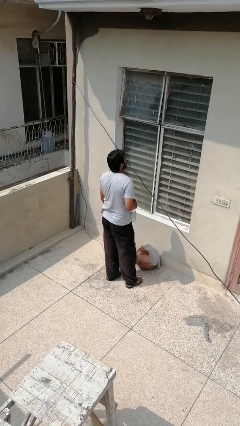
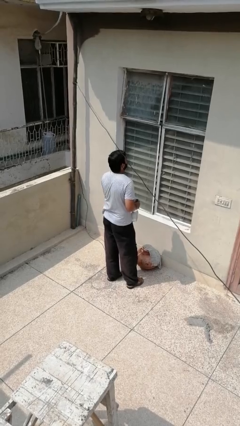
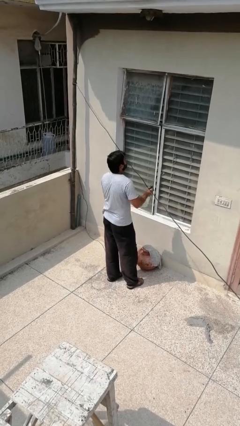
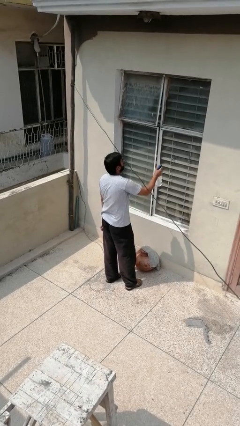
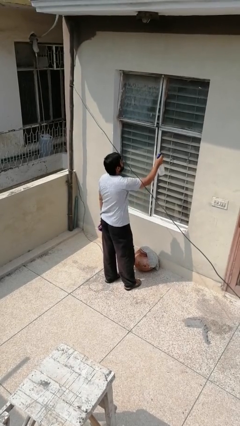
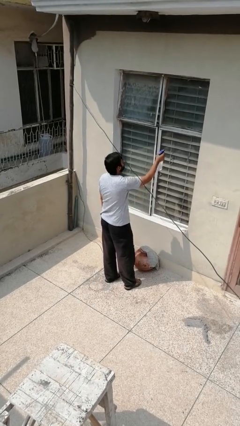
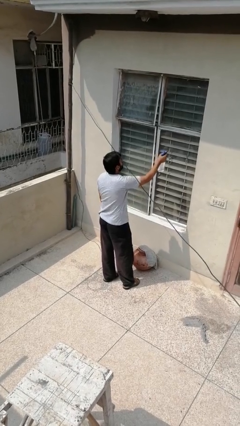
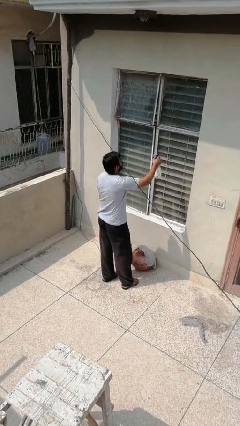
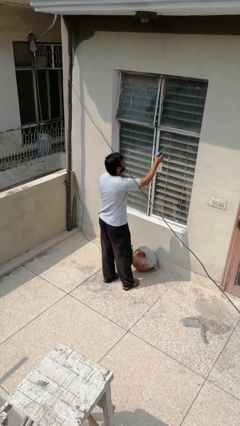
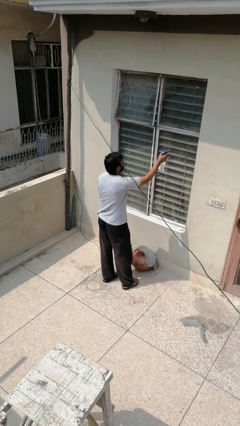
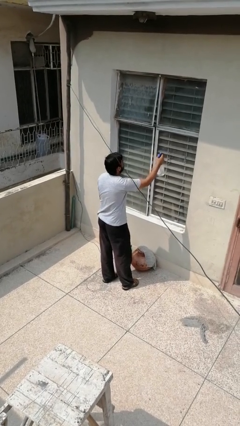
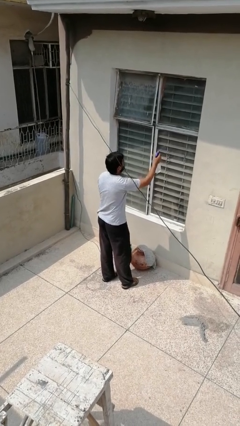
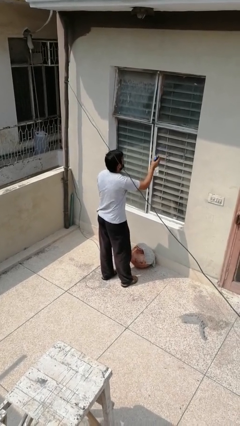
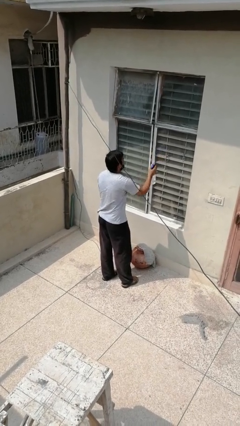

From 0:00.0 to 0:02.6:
person sprays from bottle

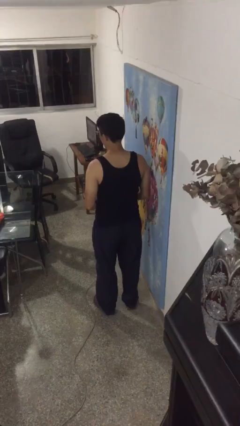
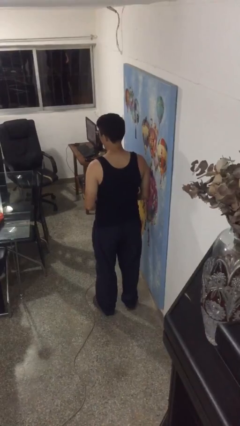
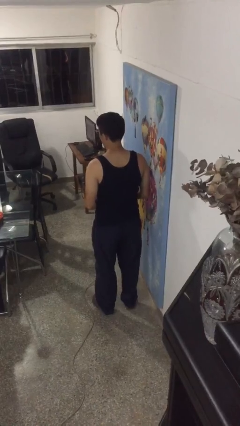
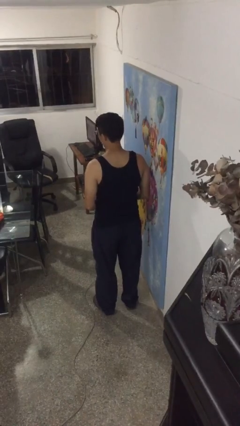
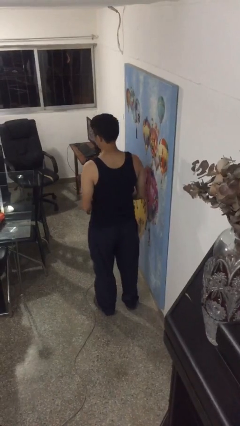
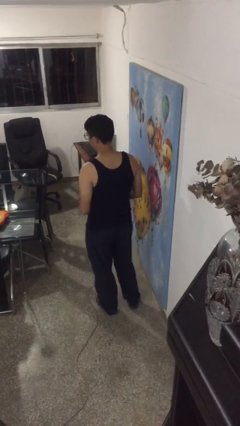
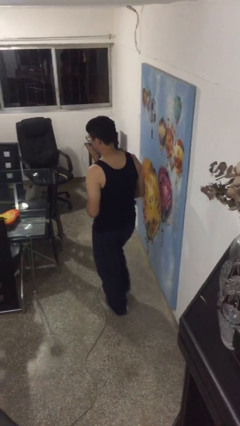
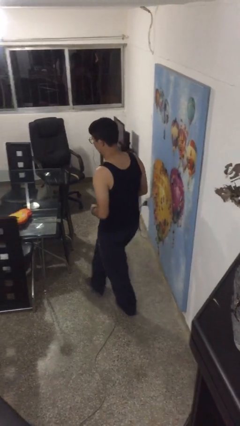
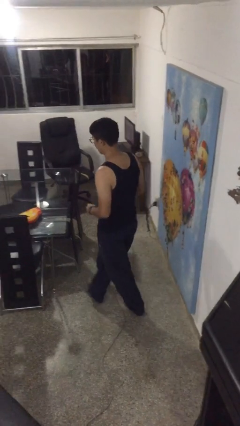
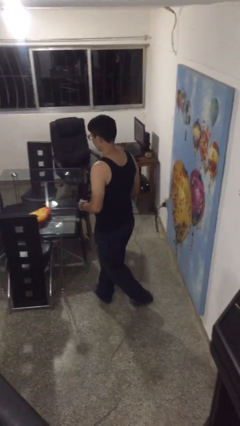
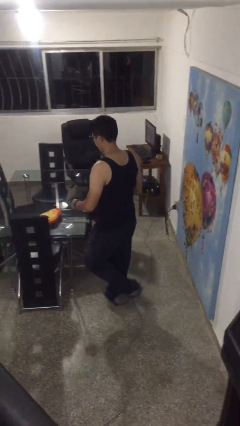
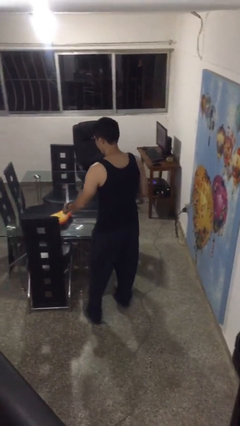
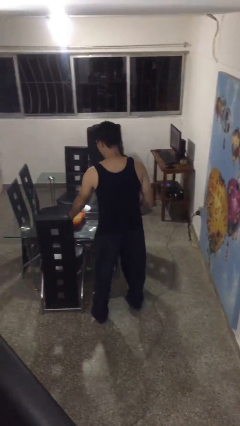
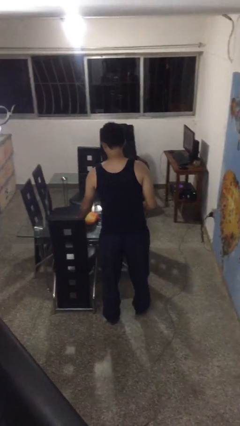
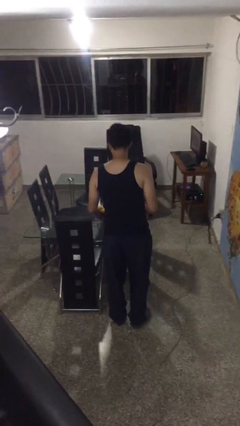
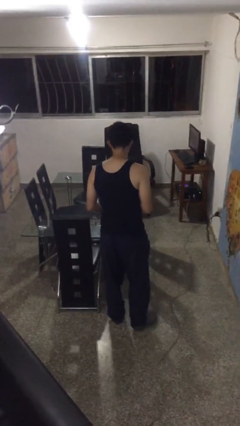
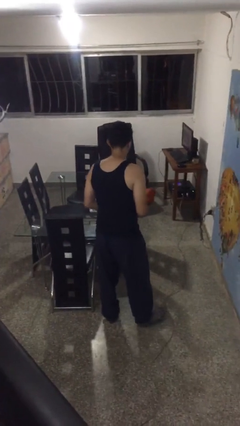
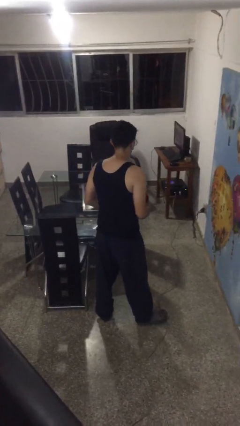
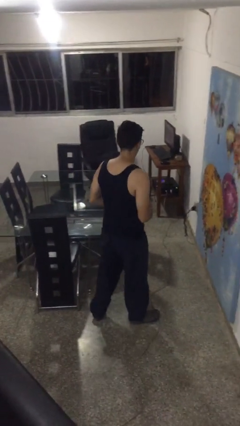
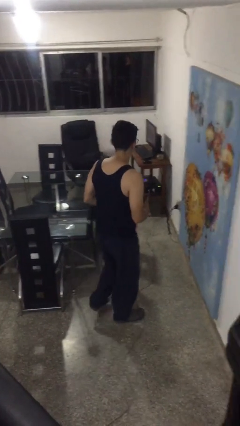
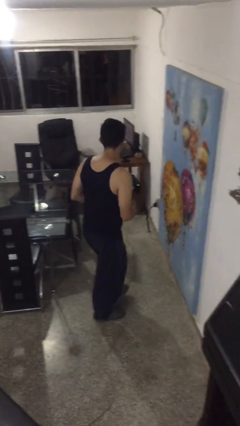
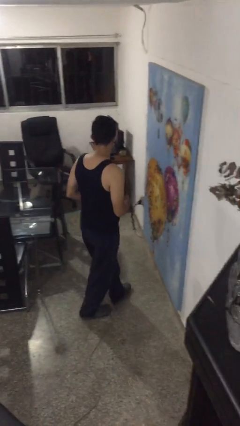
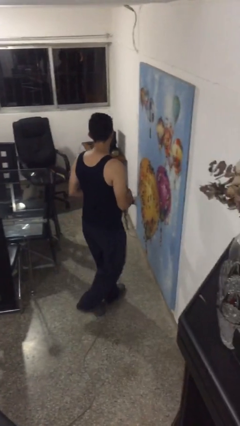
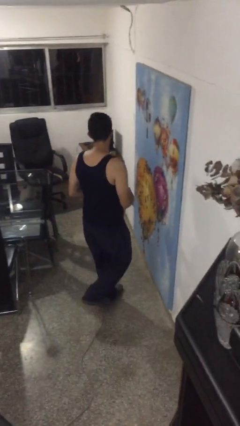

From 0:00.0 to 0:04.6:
person picks up object from table

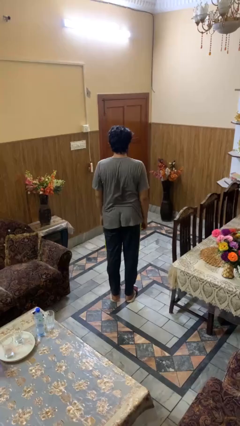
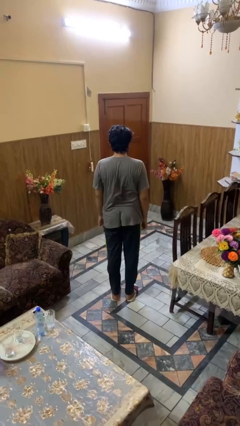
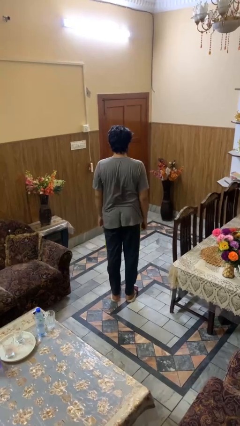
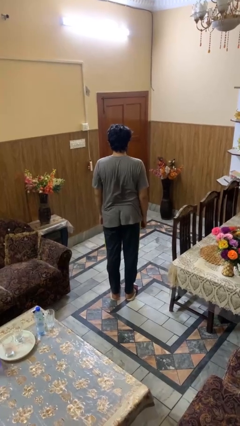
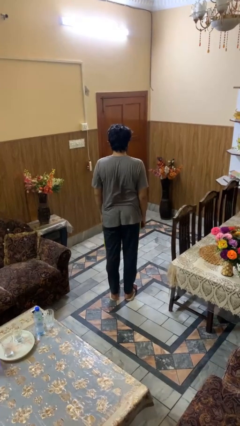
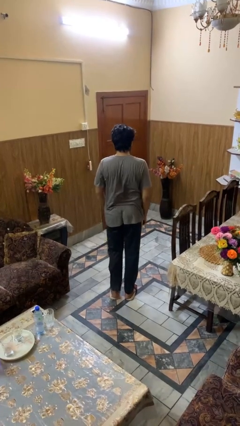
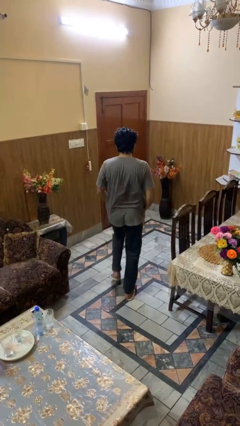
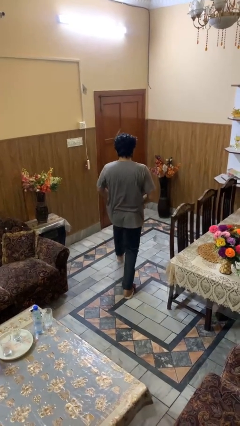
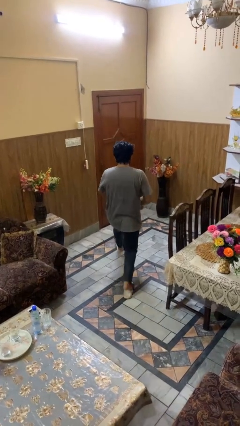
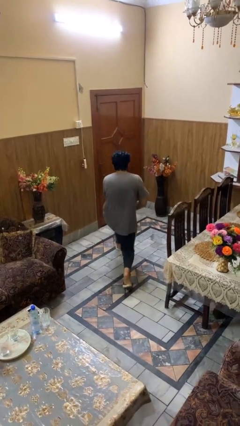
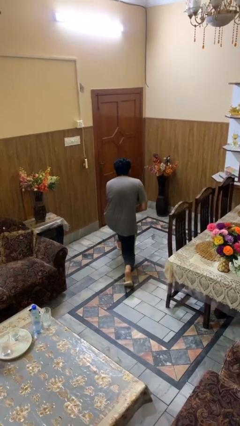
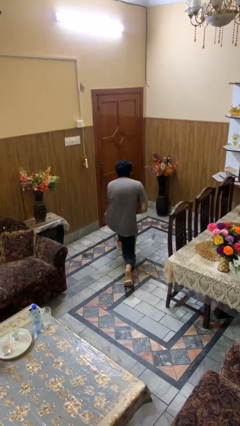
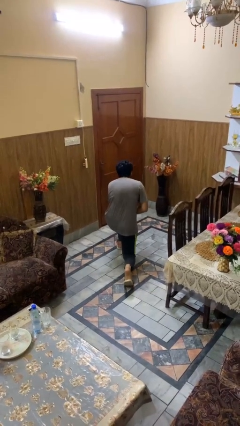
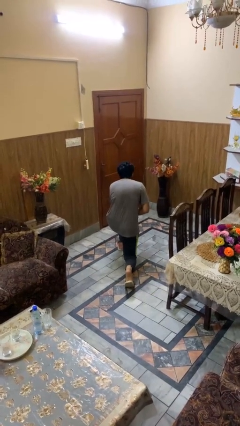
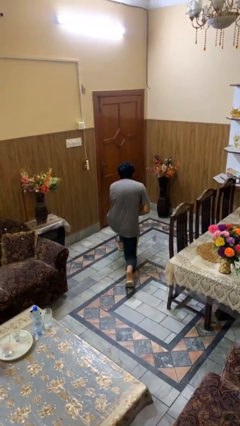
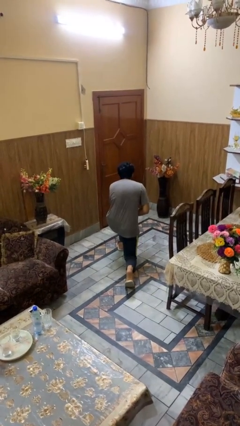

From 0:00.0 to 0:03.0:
person kneels

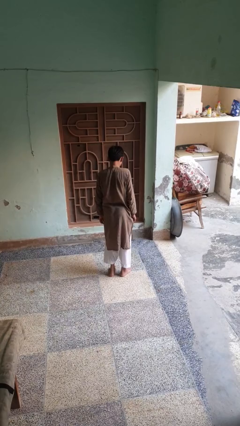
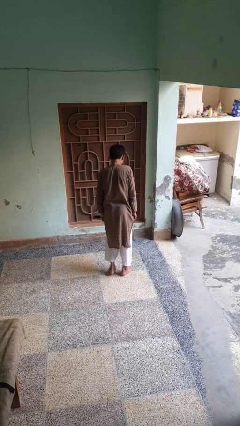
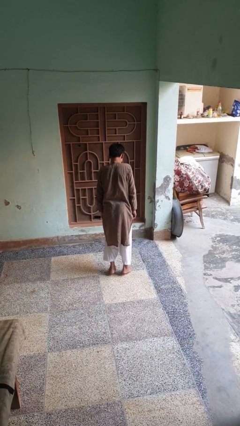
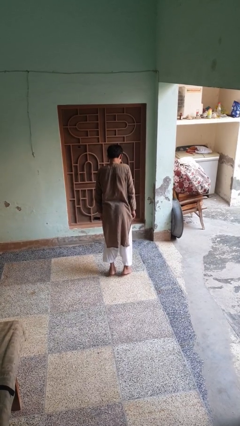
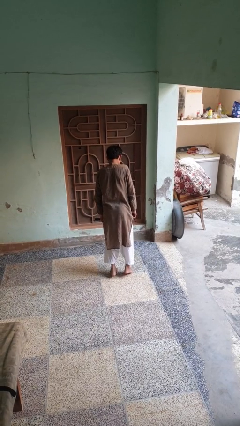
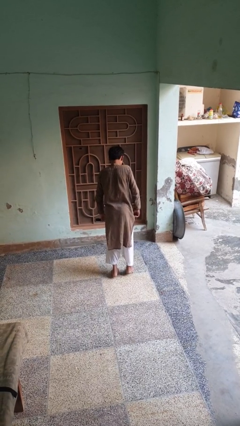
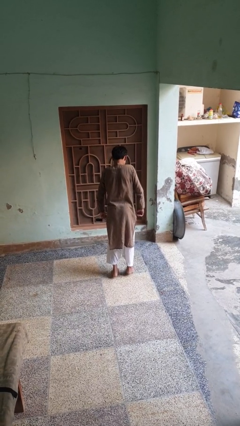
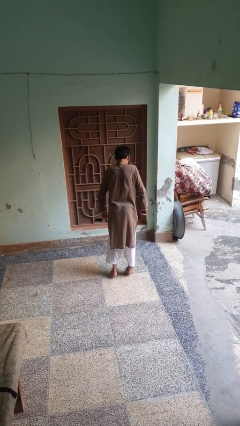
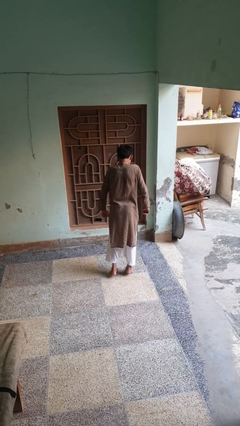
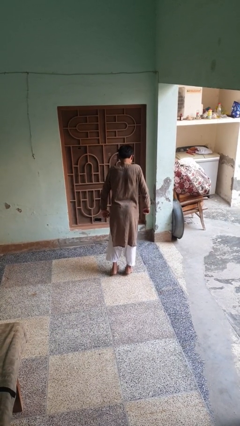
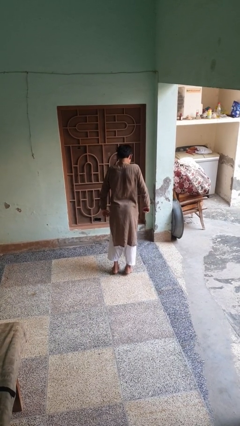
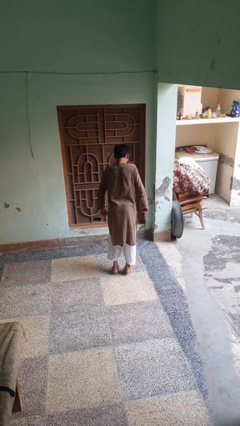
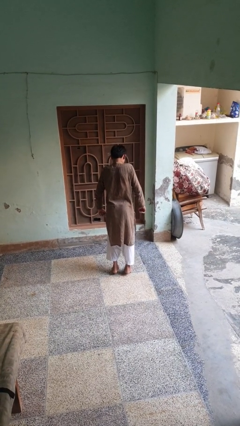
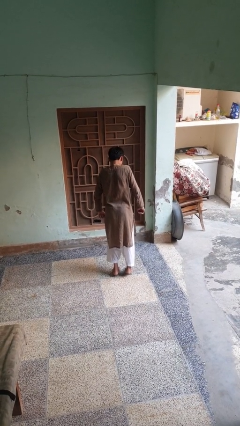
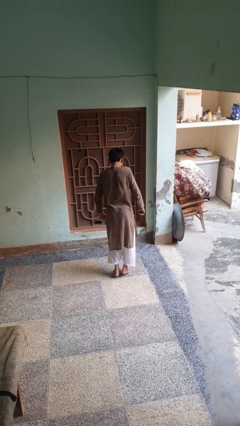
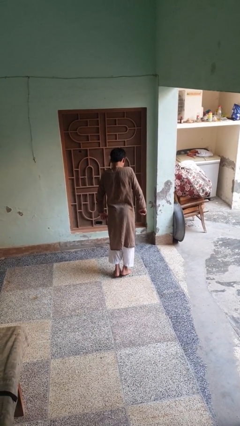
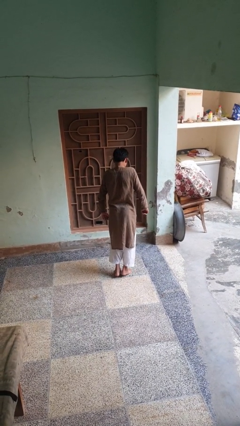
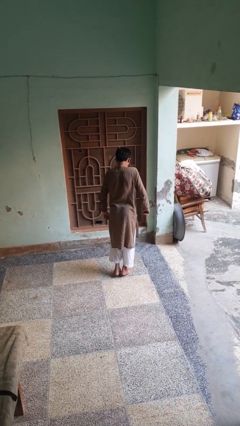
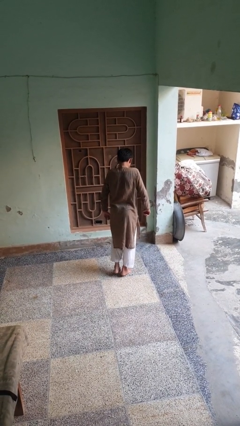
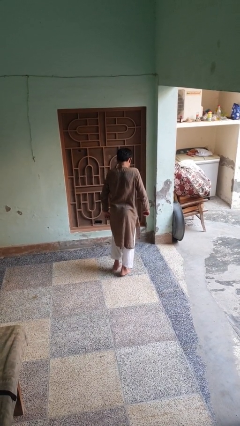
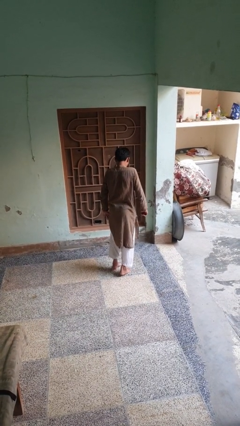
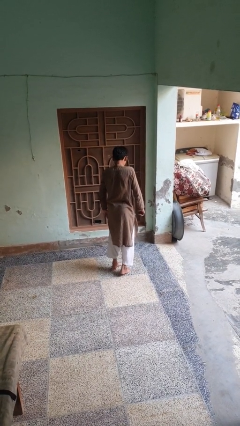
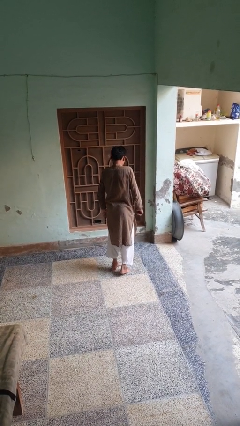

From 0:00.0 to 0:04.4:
person walks tiptoe

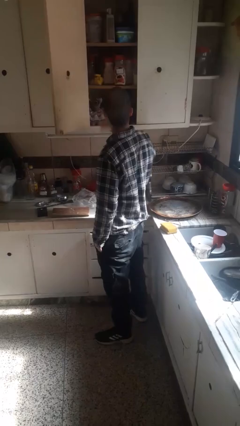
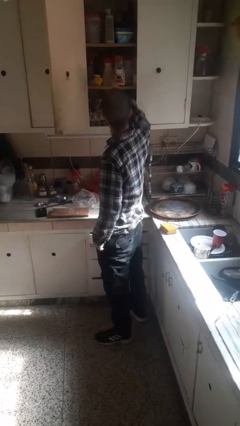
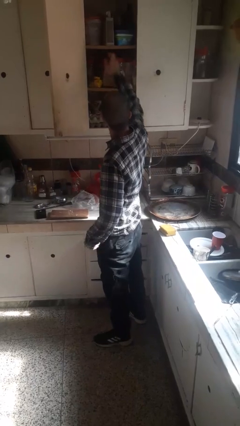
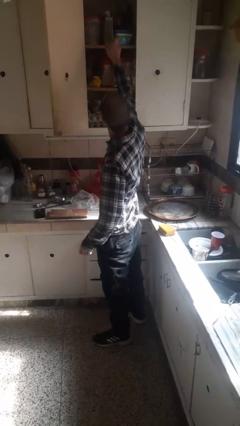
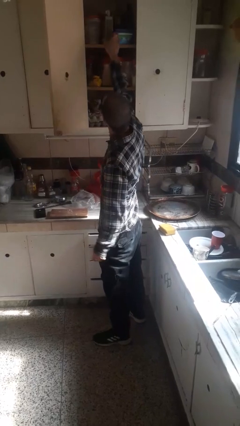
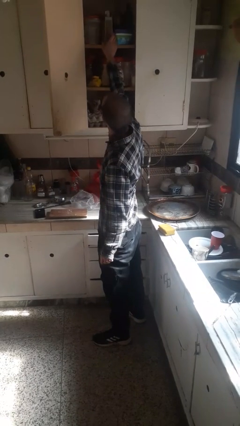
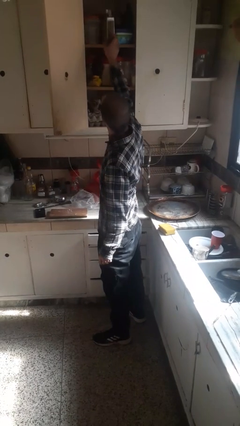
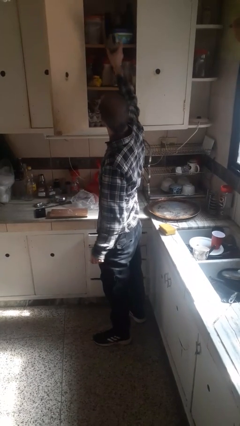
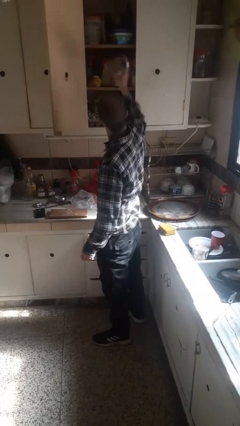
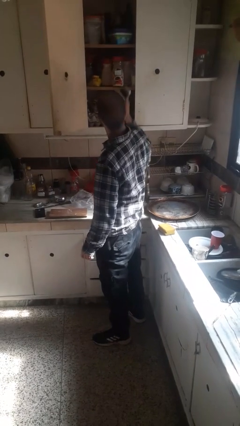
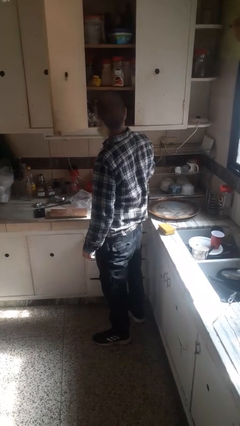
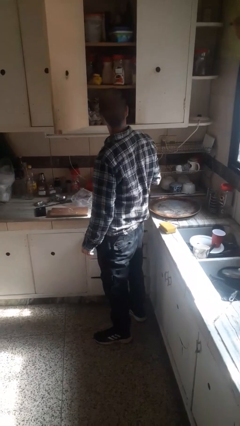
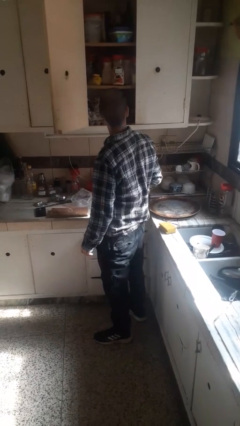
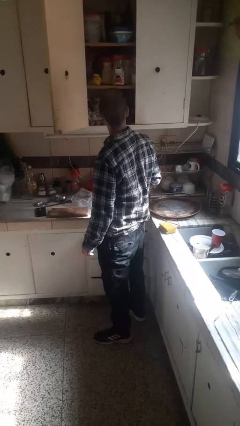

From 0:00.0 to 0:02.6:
person puts down object into cabinet

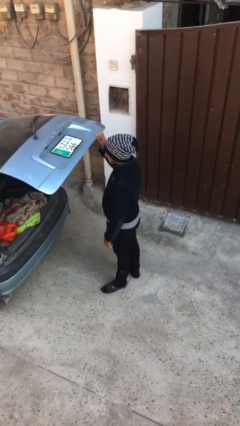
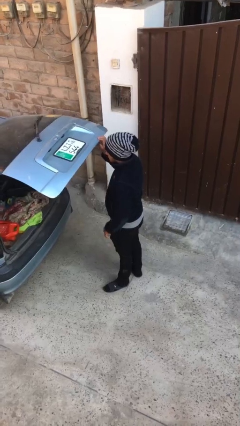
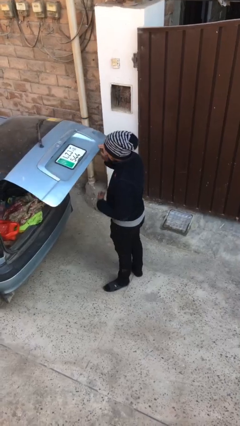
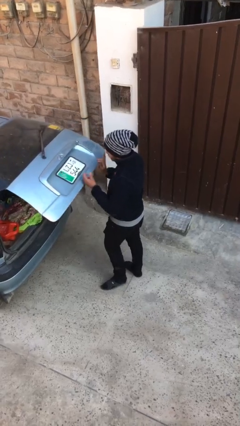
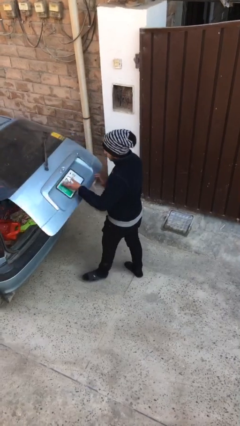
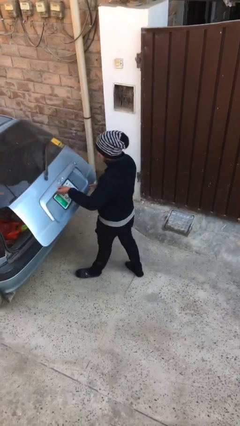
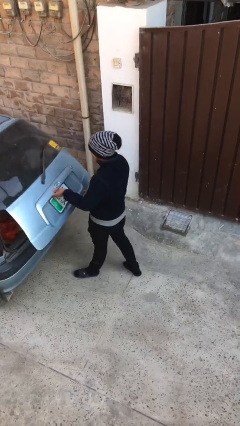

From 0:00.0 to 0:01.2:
person closes car trunk
